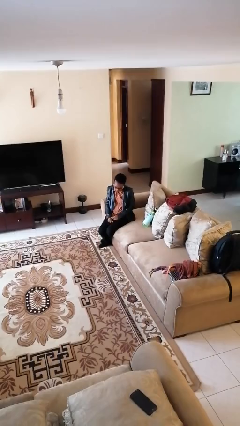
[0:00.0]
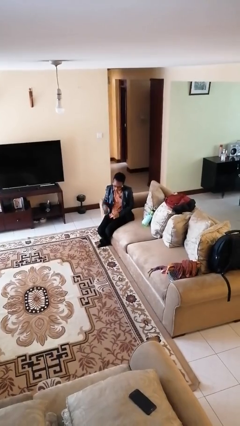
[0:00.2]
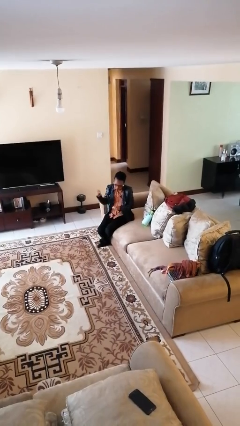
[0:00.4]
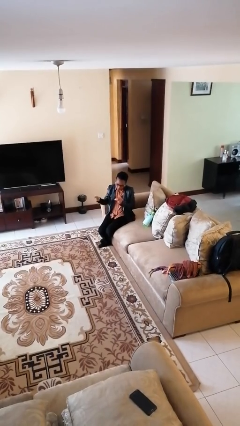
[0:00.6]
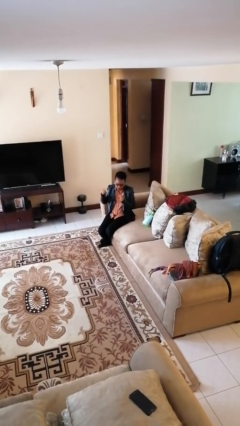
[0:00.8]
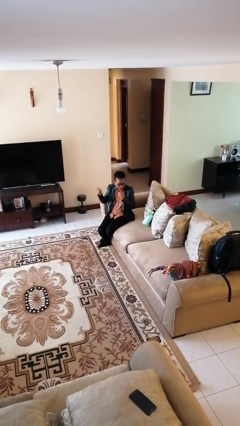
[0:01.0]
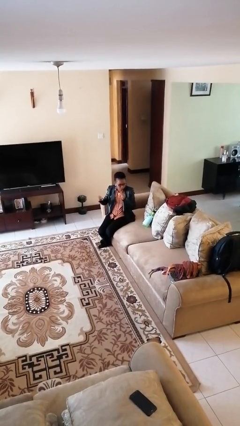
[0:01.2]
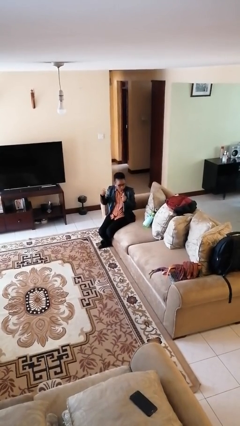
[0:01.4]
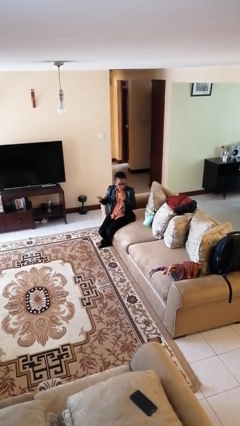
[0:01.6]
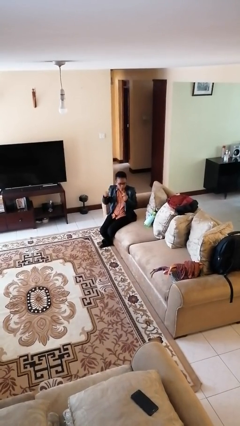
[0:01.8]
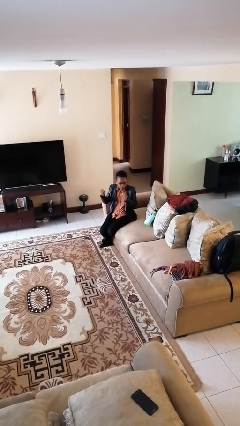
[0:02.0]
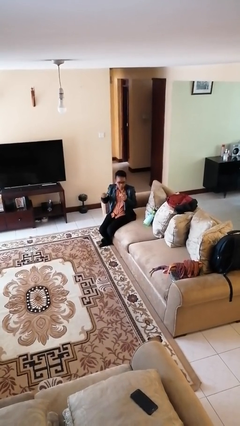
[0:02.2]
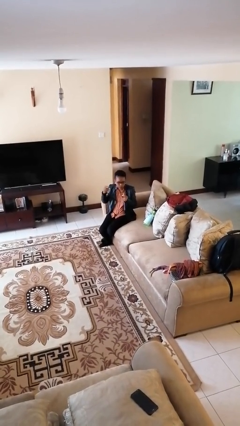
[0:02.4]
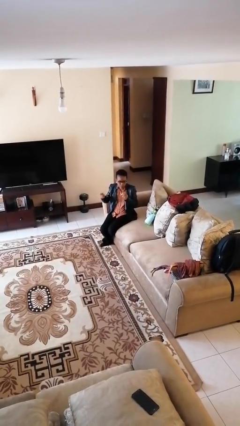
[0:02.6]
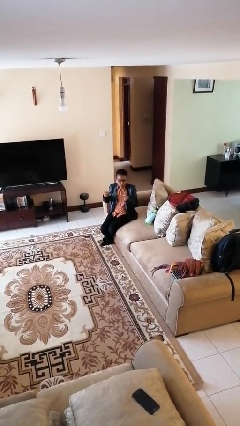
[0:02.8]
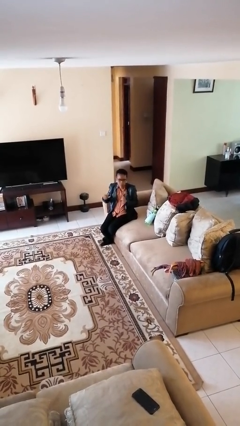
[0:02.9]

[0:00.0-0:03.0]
person snaps fingers

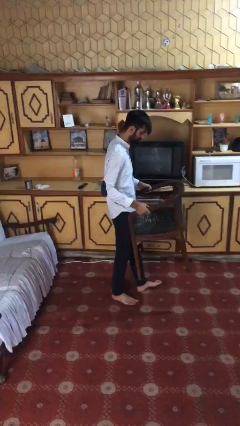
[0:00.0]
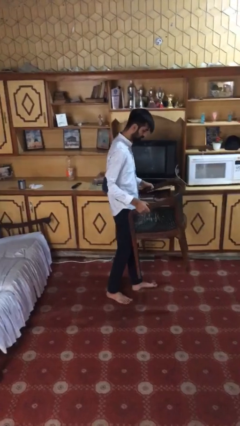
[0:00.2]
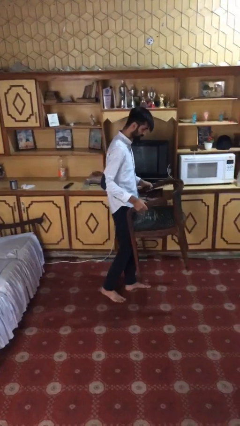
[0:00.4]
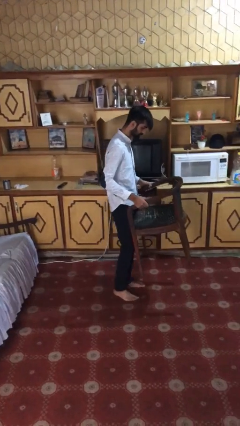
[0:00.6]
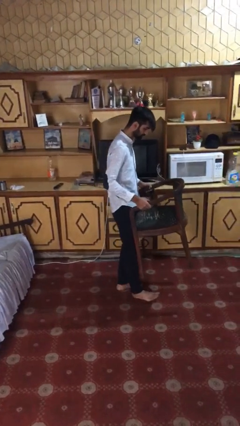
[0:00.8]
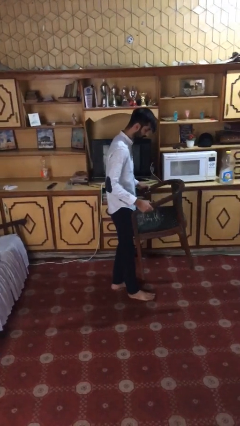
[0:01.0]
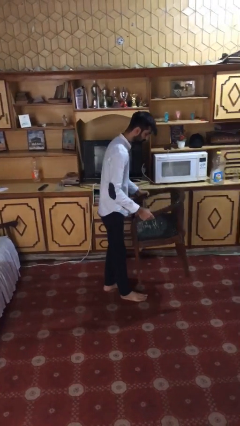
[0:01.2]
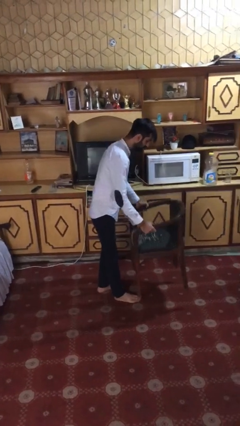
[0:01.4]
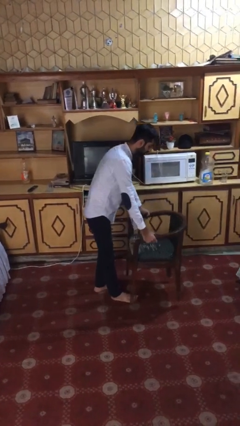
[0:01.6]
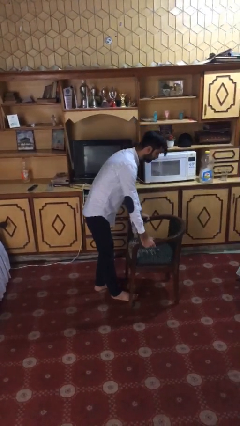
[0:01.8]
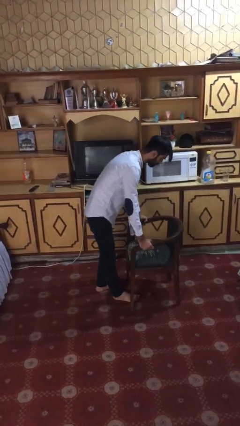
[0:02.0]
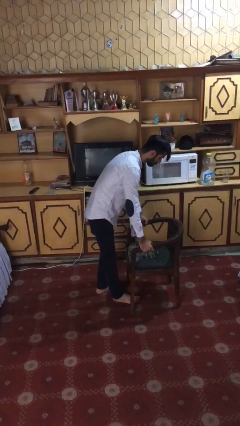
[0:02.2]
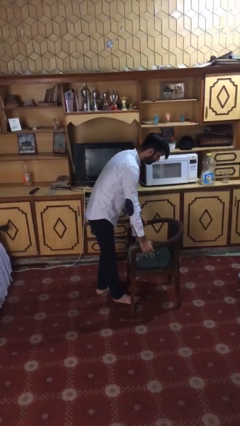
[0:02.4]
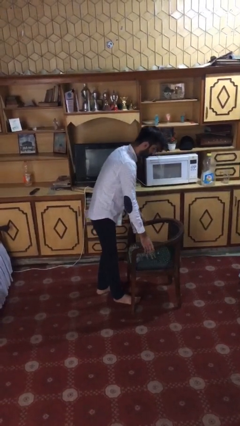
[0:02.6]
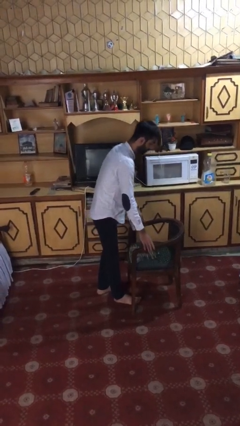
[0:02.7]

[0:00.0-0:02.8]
person puts down object on floor

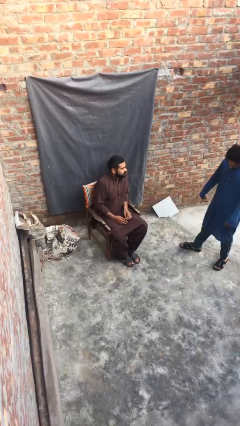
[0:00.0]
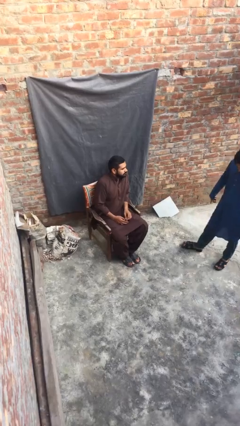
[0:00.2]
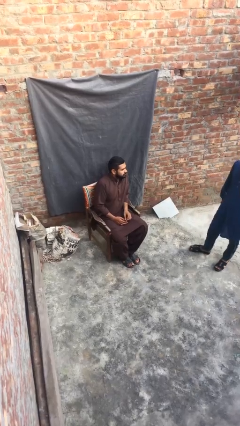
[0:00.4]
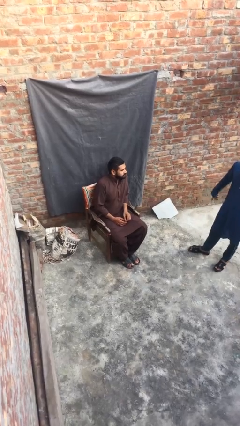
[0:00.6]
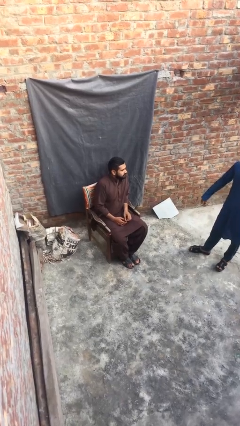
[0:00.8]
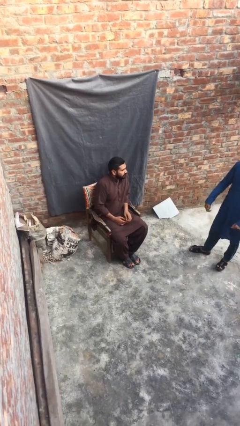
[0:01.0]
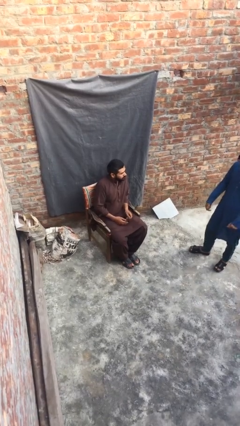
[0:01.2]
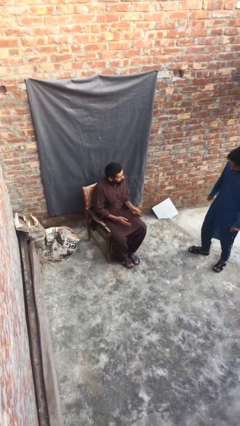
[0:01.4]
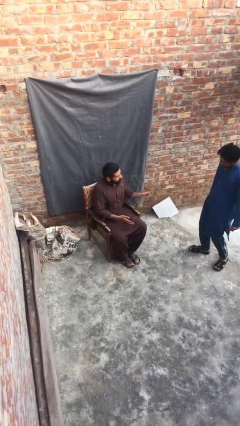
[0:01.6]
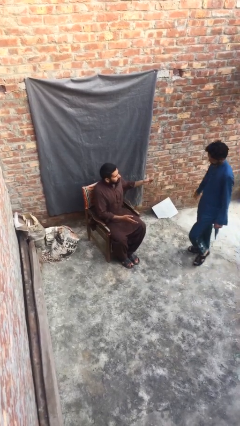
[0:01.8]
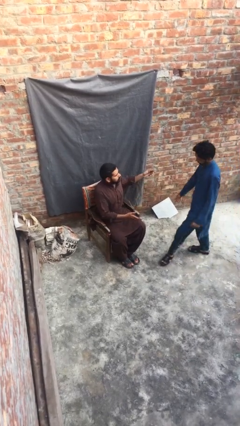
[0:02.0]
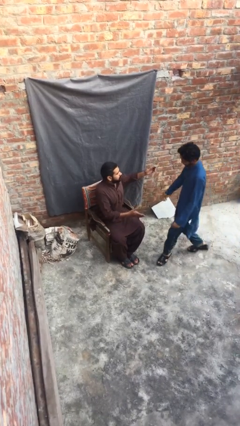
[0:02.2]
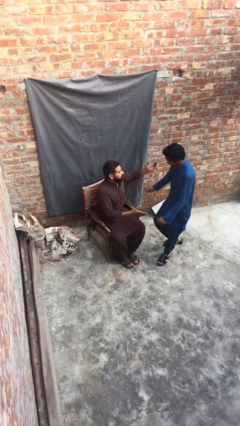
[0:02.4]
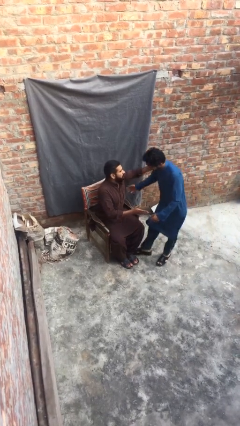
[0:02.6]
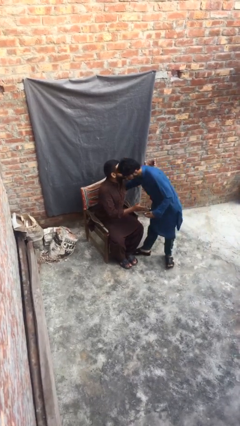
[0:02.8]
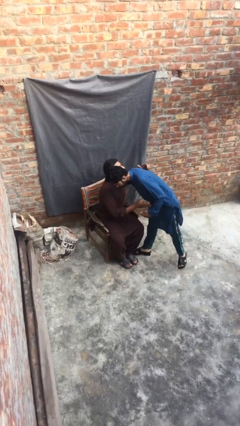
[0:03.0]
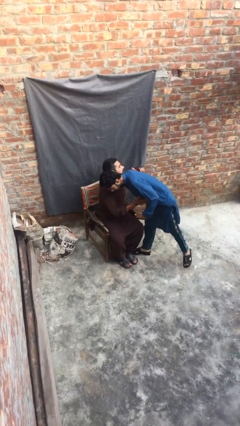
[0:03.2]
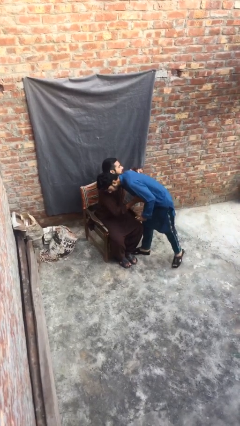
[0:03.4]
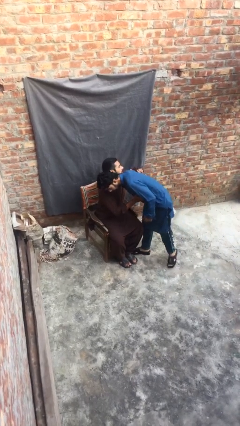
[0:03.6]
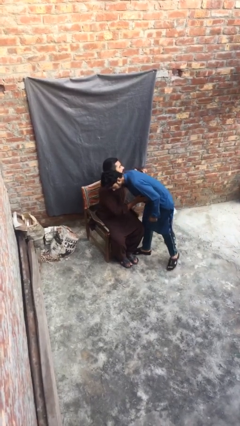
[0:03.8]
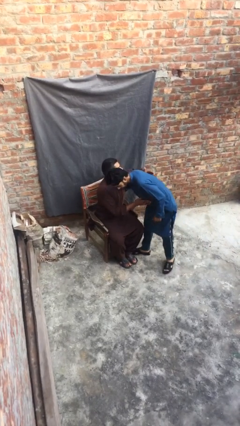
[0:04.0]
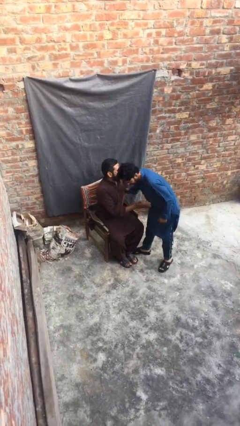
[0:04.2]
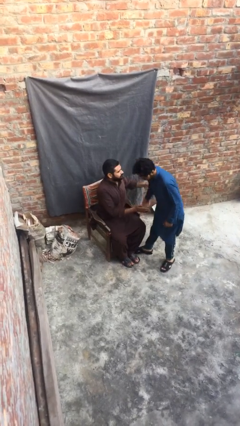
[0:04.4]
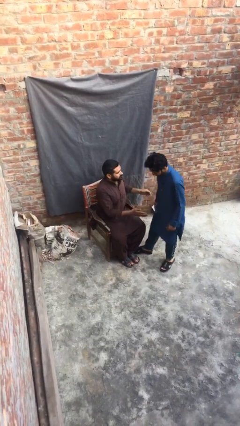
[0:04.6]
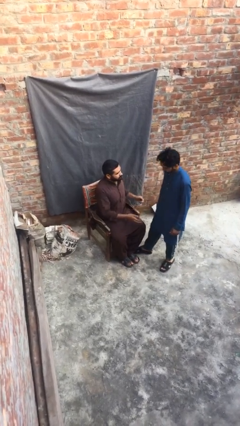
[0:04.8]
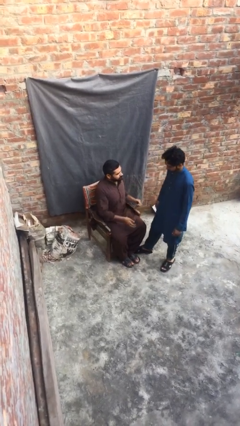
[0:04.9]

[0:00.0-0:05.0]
person embraces person

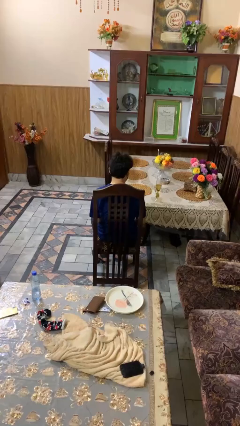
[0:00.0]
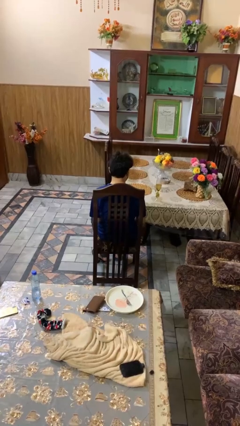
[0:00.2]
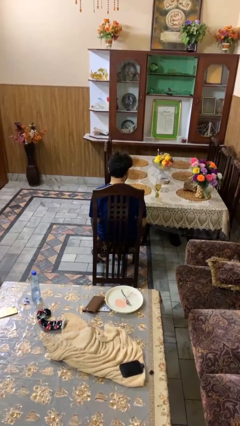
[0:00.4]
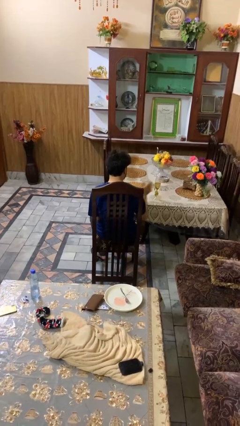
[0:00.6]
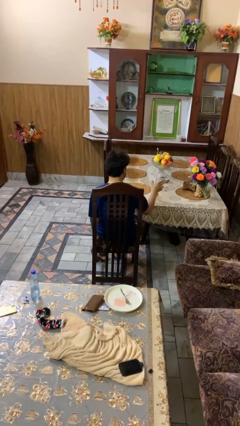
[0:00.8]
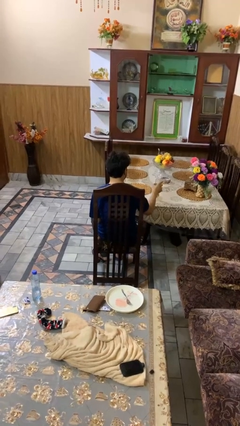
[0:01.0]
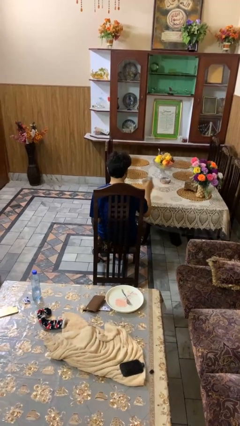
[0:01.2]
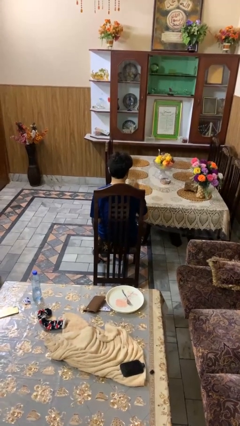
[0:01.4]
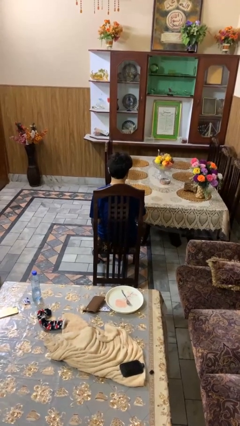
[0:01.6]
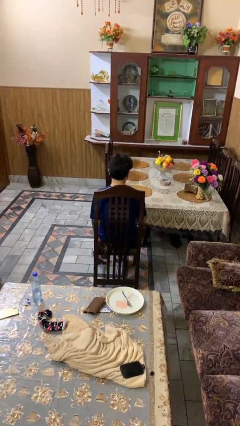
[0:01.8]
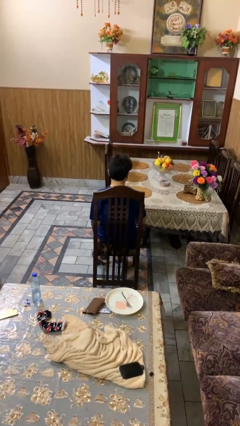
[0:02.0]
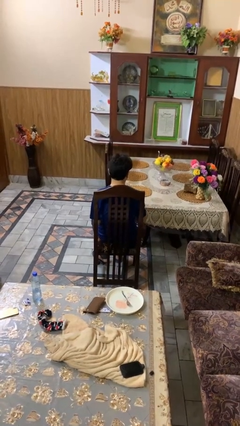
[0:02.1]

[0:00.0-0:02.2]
person picks up object from table

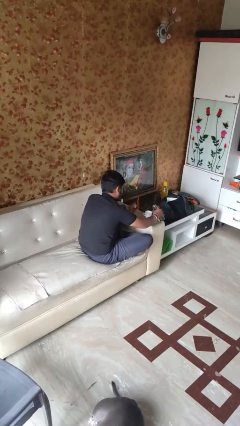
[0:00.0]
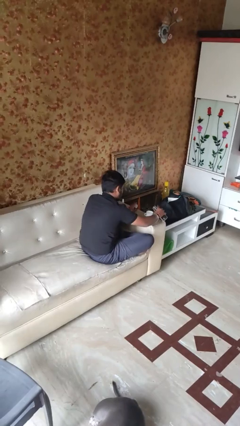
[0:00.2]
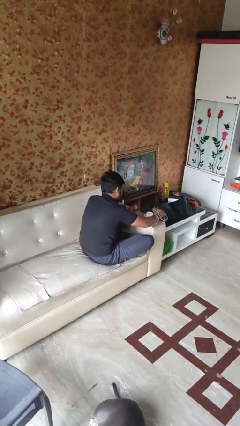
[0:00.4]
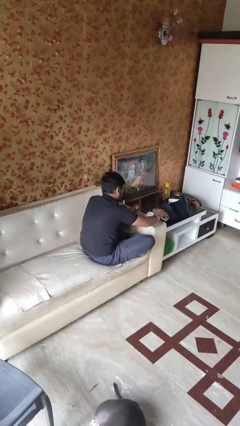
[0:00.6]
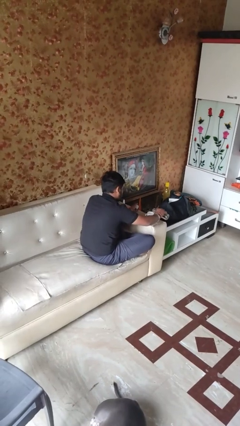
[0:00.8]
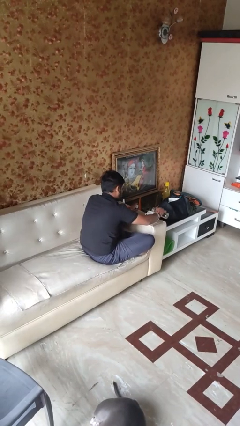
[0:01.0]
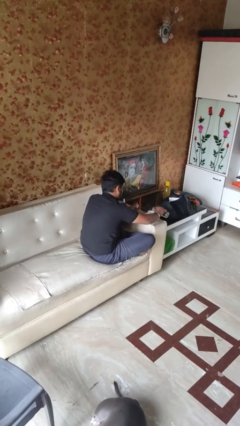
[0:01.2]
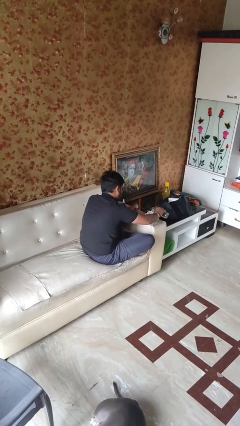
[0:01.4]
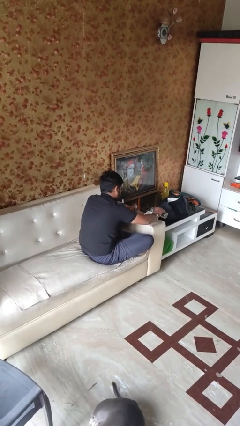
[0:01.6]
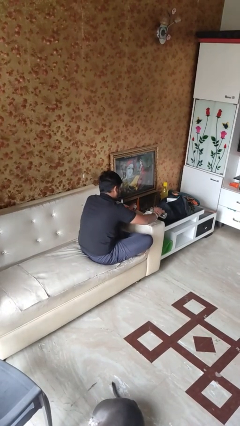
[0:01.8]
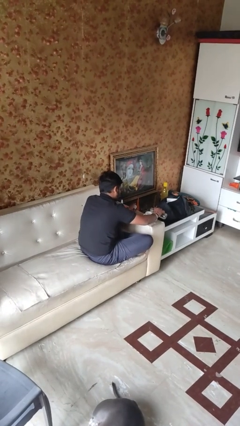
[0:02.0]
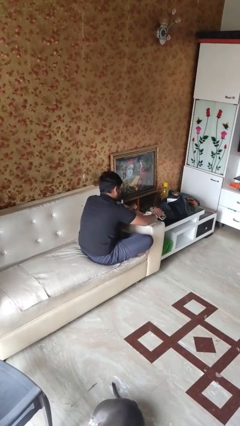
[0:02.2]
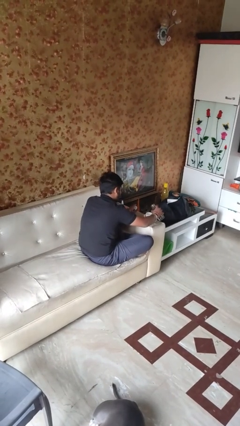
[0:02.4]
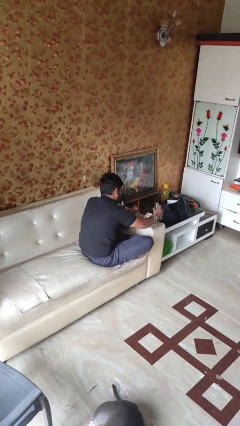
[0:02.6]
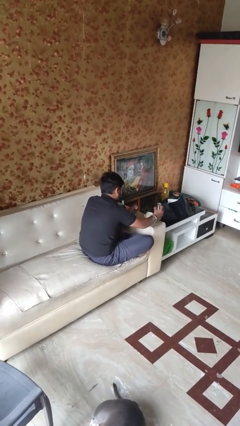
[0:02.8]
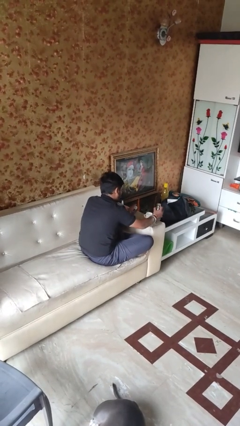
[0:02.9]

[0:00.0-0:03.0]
person pours liquid into cup

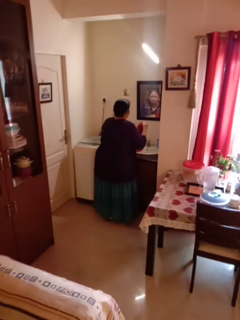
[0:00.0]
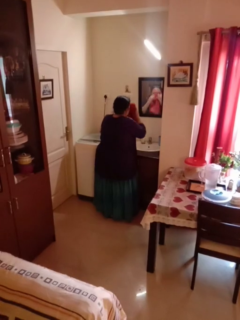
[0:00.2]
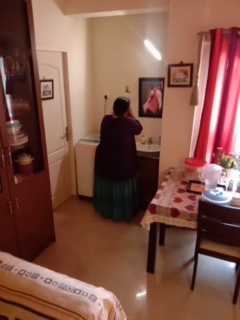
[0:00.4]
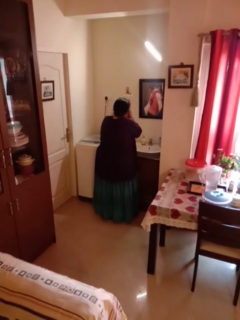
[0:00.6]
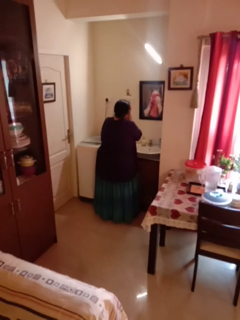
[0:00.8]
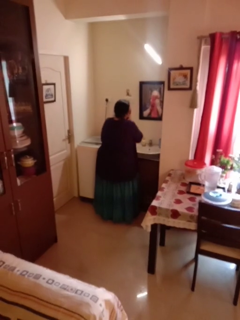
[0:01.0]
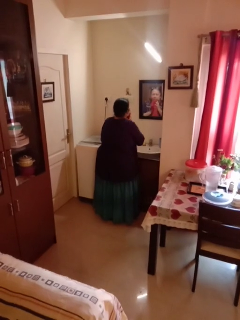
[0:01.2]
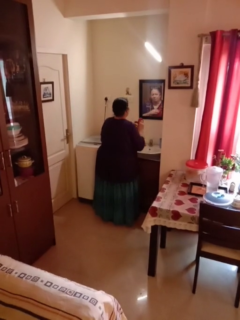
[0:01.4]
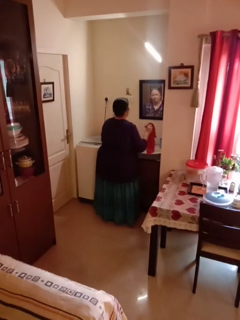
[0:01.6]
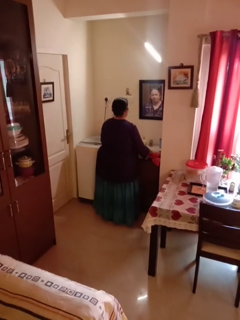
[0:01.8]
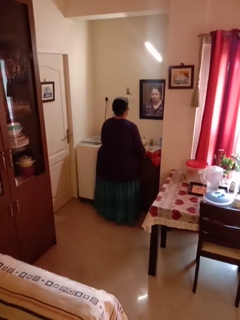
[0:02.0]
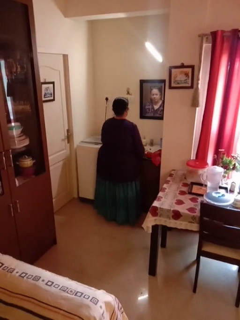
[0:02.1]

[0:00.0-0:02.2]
person dries face with towel

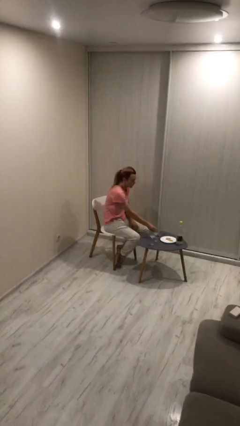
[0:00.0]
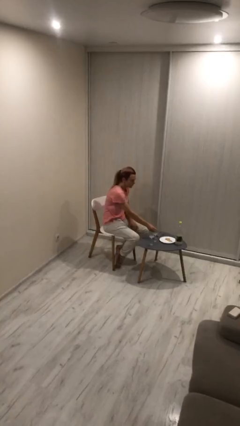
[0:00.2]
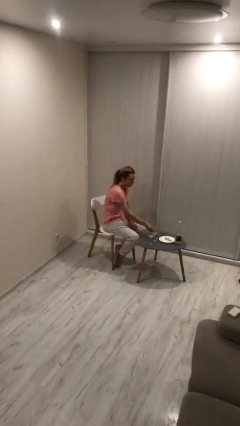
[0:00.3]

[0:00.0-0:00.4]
person puts down object on table
